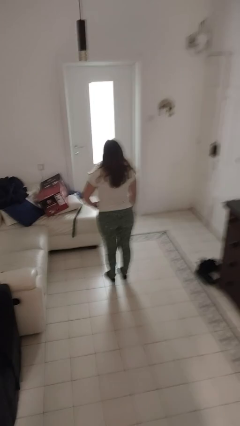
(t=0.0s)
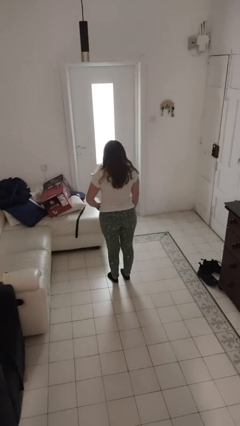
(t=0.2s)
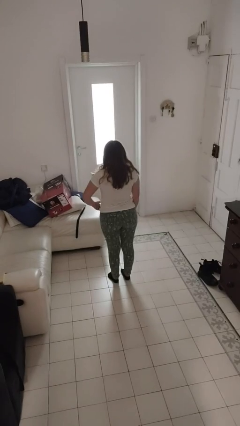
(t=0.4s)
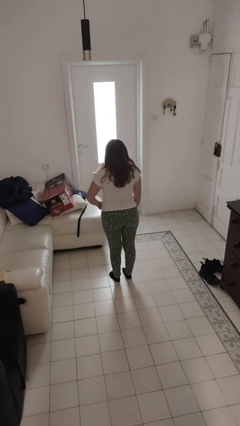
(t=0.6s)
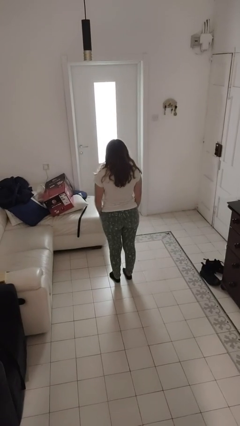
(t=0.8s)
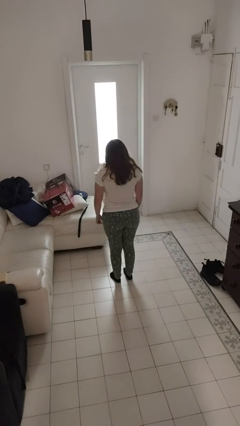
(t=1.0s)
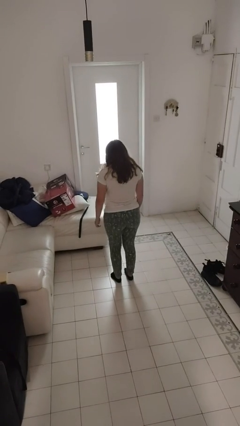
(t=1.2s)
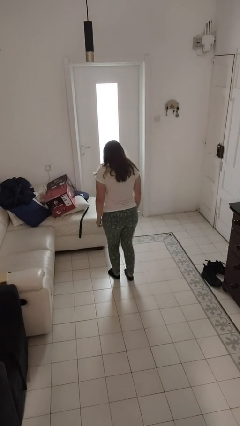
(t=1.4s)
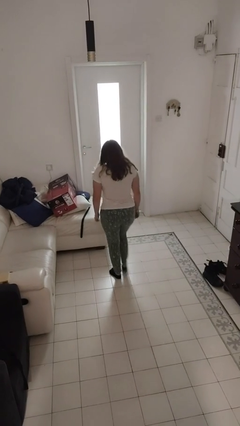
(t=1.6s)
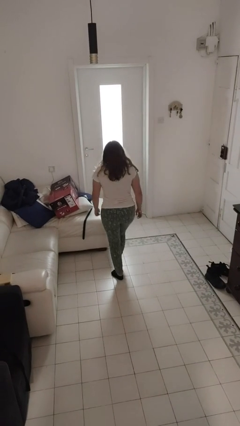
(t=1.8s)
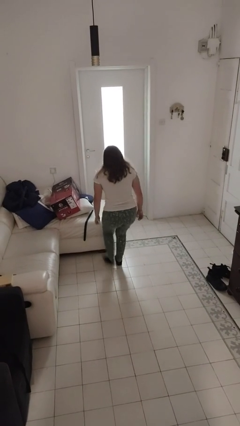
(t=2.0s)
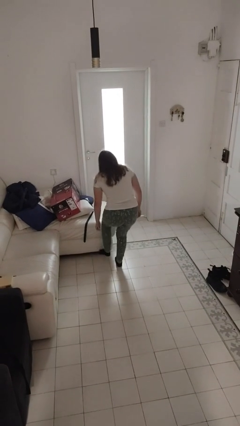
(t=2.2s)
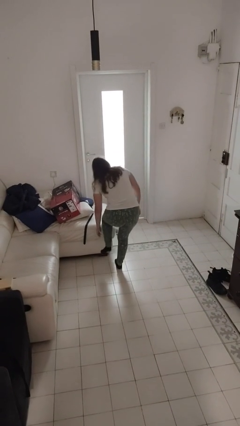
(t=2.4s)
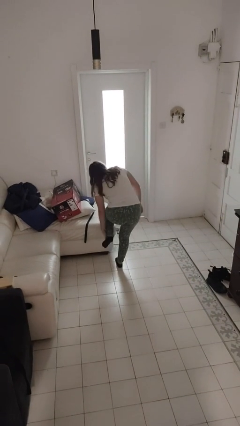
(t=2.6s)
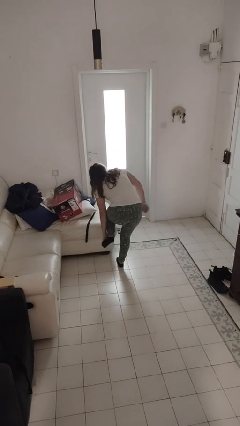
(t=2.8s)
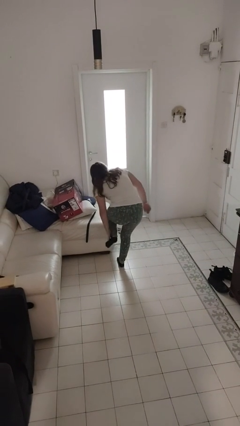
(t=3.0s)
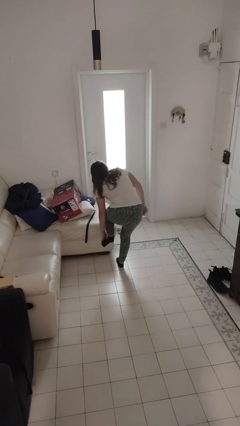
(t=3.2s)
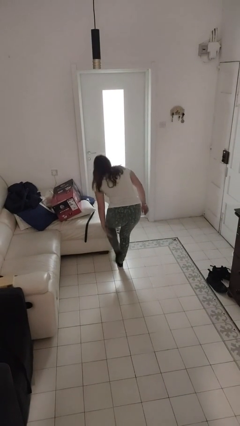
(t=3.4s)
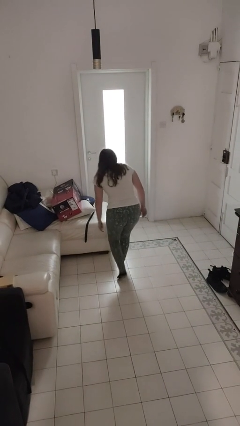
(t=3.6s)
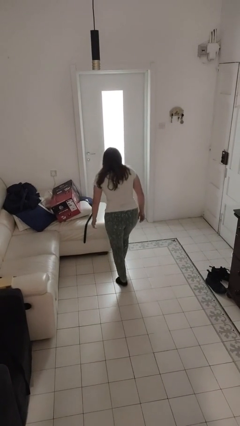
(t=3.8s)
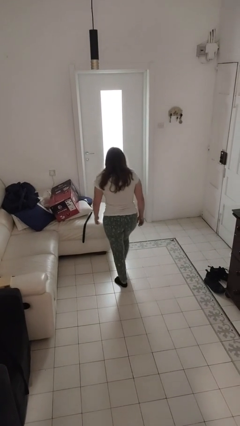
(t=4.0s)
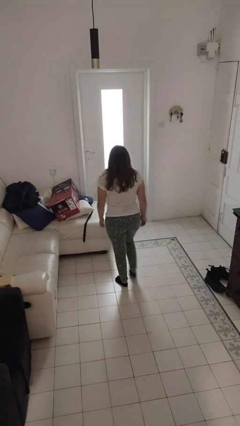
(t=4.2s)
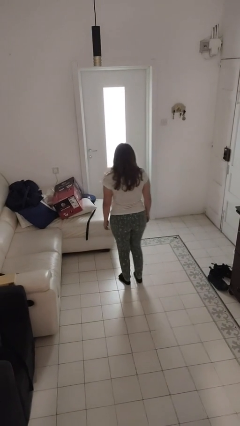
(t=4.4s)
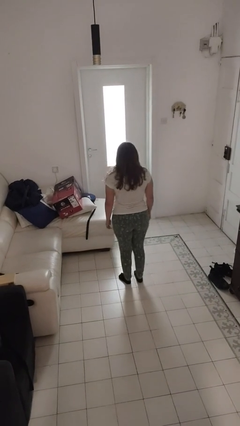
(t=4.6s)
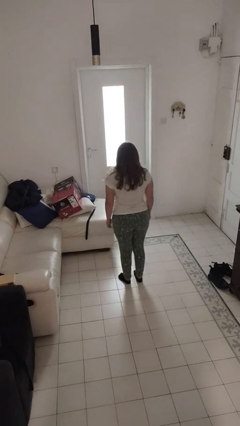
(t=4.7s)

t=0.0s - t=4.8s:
person stubs toe

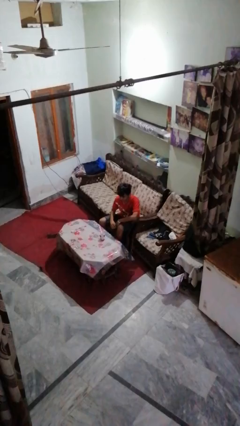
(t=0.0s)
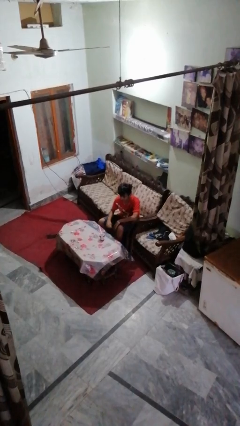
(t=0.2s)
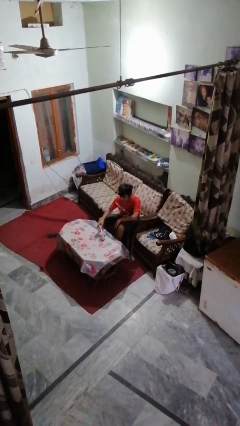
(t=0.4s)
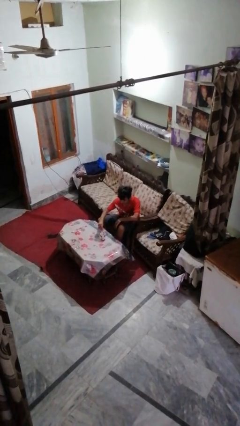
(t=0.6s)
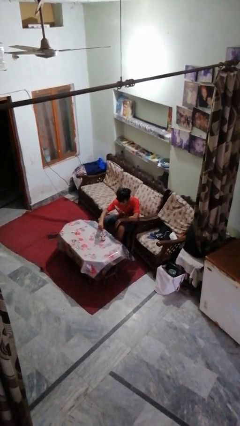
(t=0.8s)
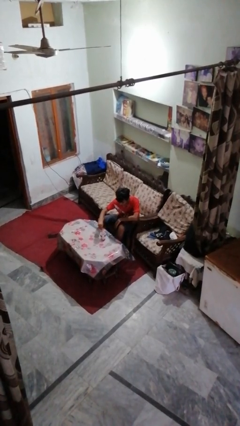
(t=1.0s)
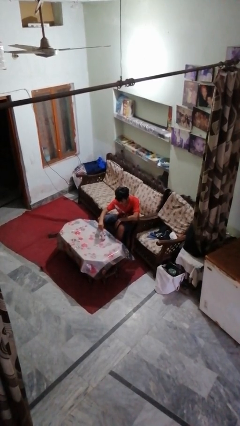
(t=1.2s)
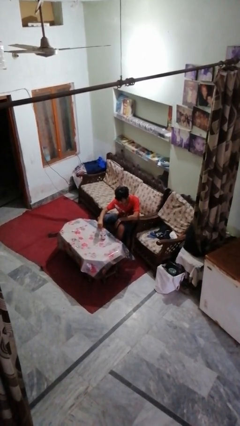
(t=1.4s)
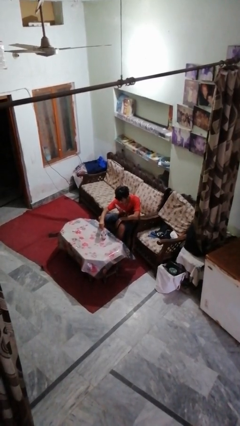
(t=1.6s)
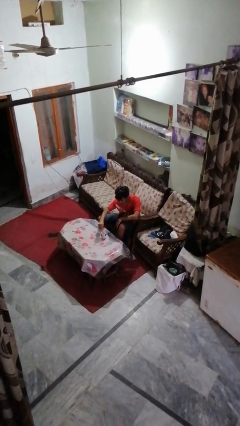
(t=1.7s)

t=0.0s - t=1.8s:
person stirs mug

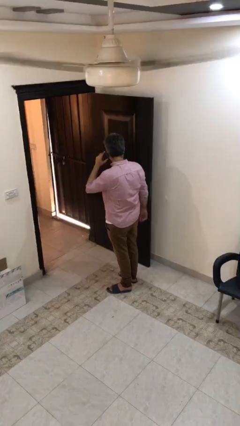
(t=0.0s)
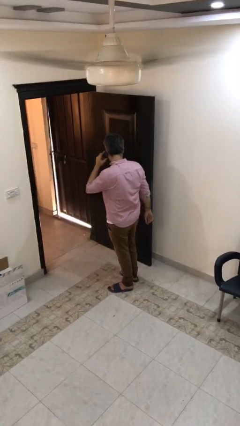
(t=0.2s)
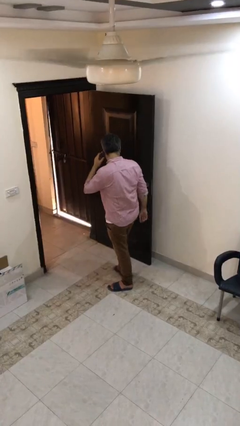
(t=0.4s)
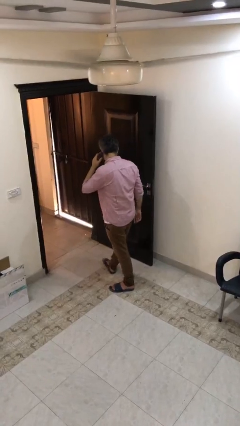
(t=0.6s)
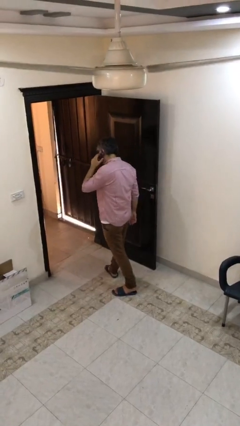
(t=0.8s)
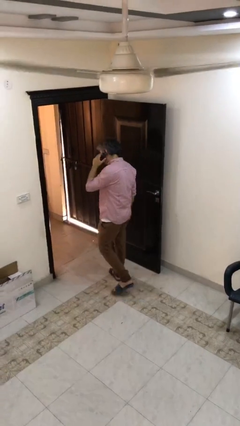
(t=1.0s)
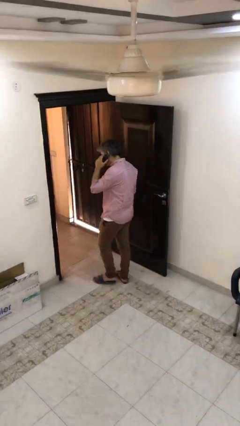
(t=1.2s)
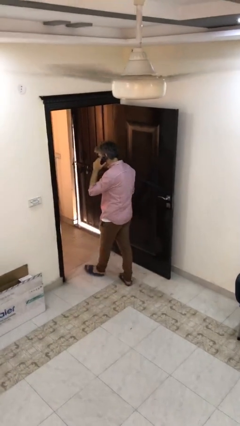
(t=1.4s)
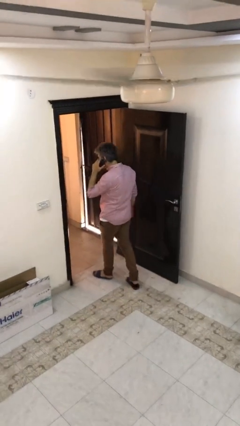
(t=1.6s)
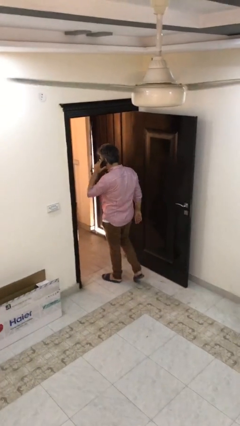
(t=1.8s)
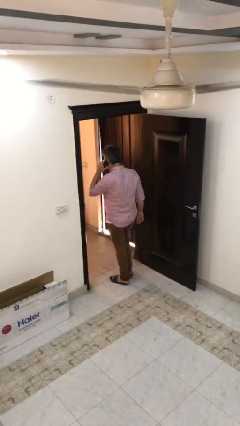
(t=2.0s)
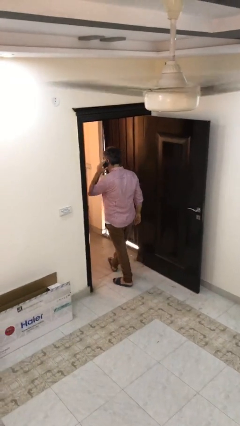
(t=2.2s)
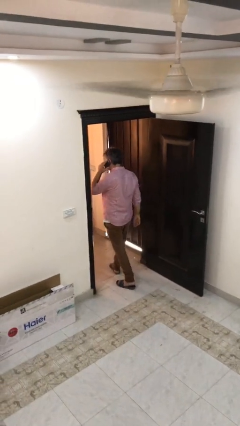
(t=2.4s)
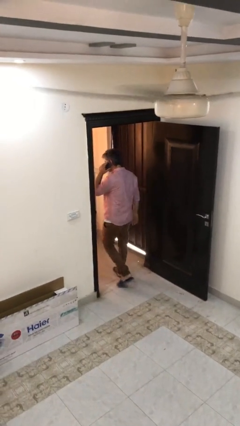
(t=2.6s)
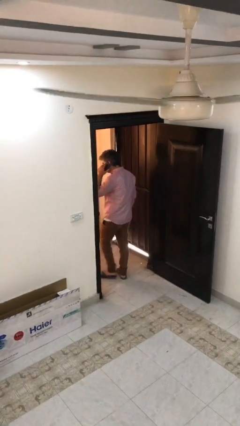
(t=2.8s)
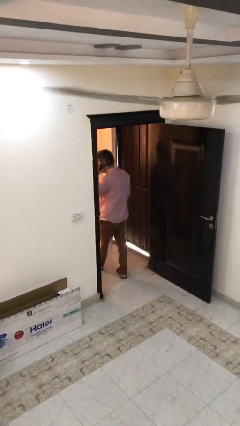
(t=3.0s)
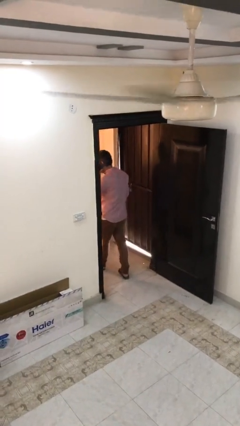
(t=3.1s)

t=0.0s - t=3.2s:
person exits scene through structure

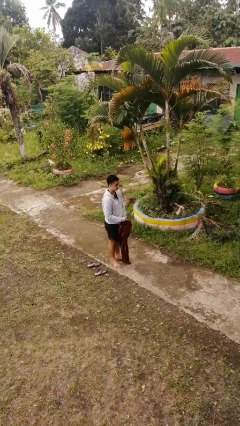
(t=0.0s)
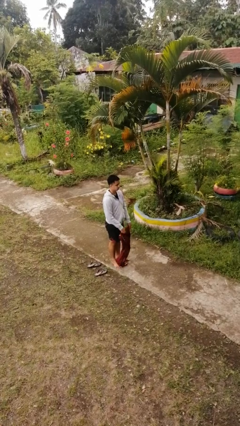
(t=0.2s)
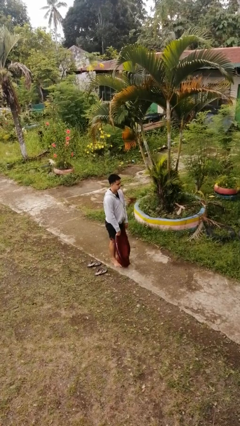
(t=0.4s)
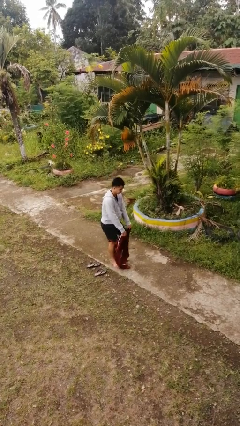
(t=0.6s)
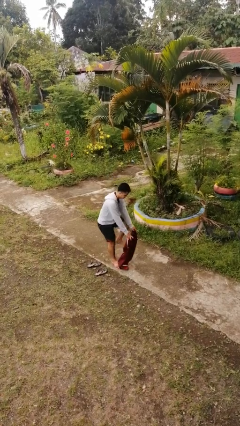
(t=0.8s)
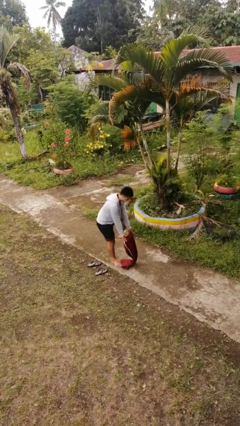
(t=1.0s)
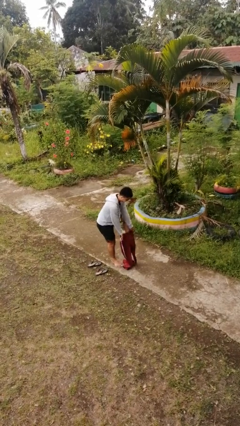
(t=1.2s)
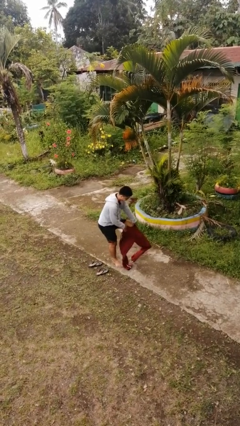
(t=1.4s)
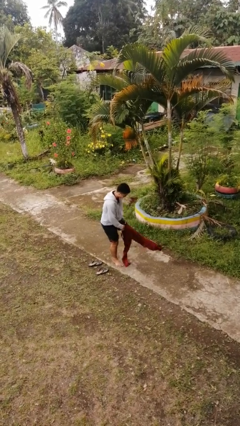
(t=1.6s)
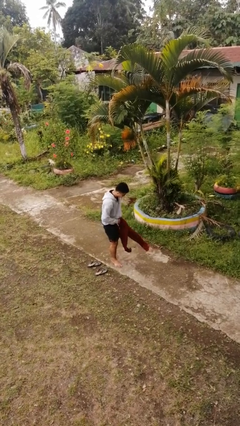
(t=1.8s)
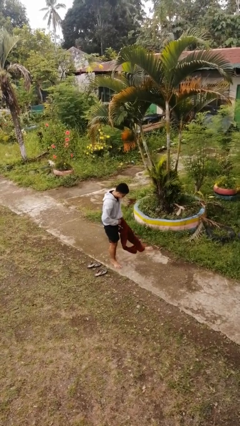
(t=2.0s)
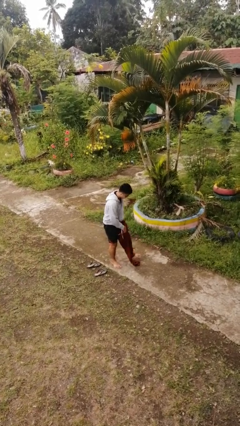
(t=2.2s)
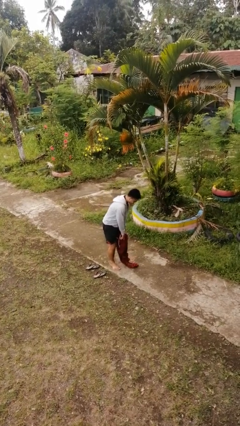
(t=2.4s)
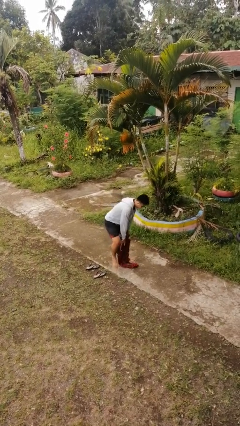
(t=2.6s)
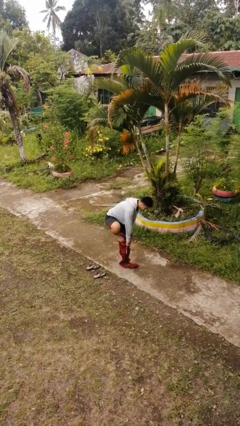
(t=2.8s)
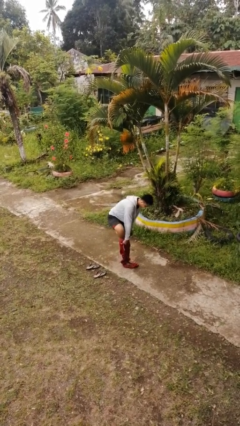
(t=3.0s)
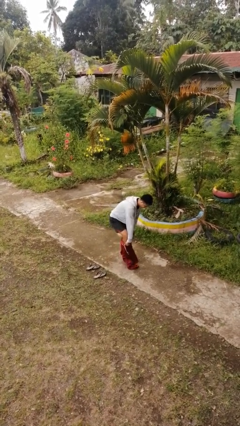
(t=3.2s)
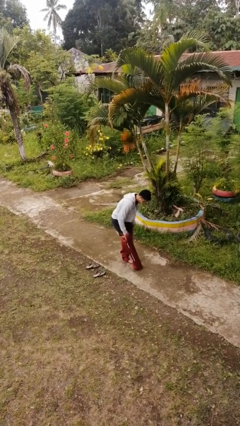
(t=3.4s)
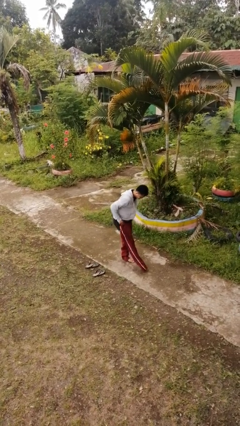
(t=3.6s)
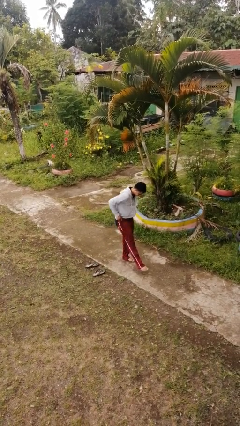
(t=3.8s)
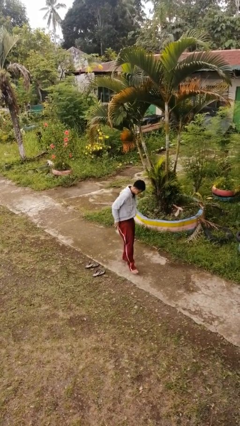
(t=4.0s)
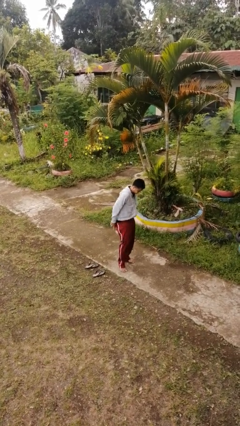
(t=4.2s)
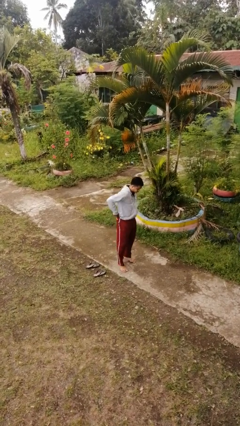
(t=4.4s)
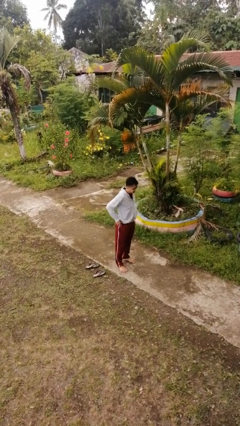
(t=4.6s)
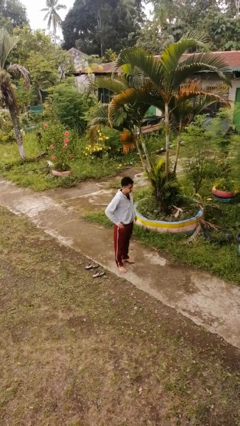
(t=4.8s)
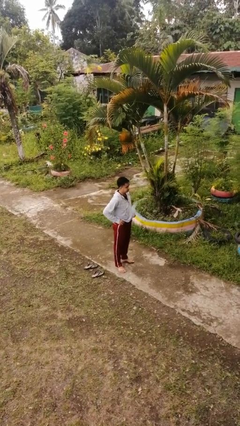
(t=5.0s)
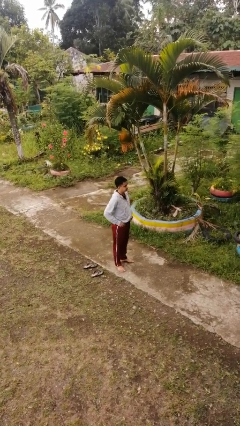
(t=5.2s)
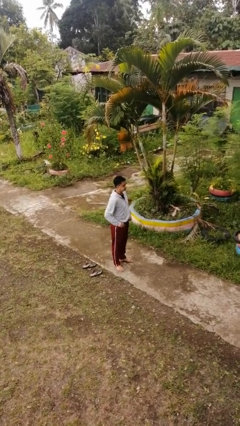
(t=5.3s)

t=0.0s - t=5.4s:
person takes off pants

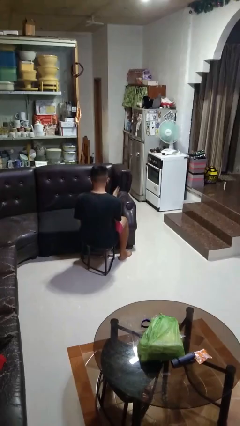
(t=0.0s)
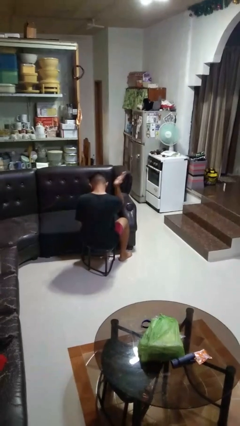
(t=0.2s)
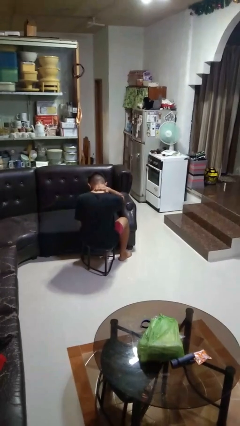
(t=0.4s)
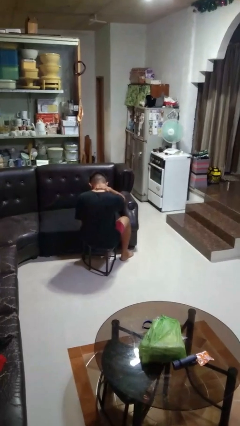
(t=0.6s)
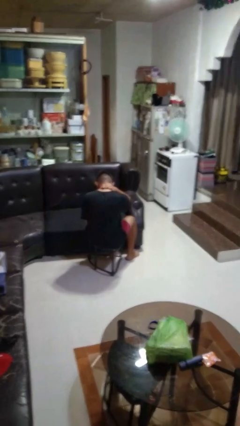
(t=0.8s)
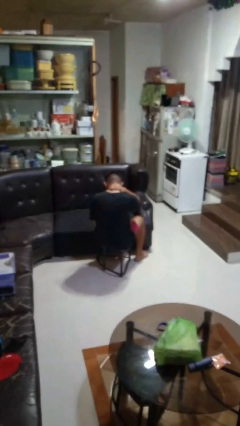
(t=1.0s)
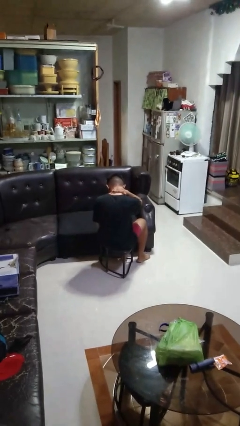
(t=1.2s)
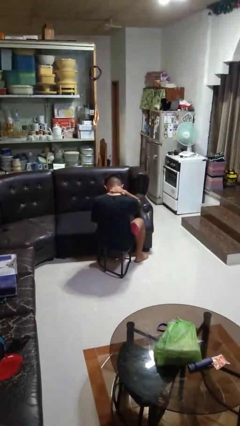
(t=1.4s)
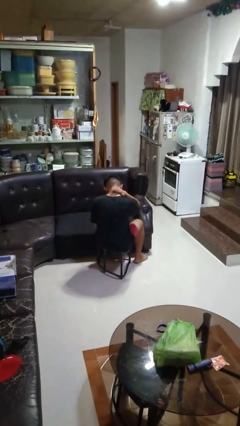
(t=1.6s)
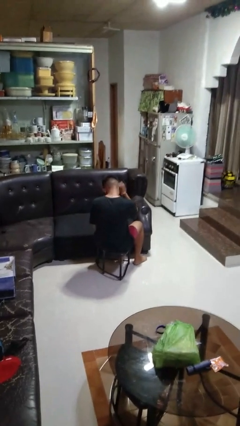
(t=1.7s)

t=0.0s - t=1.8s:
person swats bug

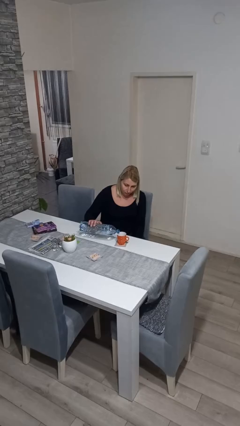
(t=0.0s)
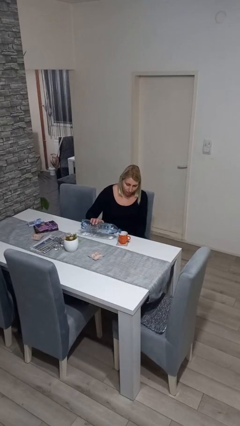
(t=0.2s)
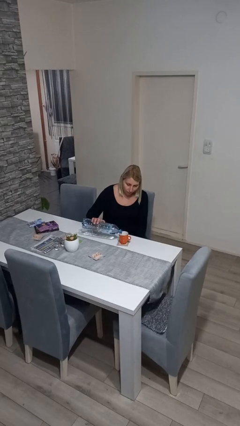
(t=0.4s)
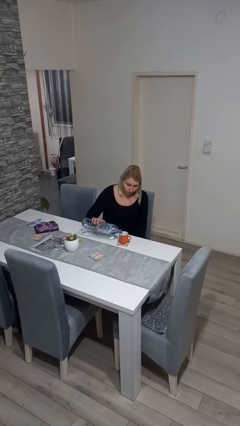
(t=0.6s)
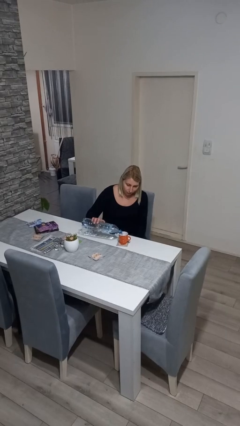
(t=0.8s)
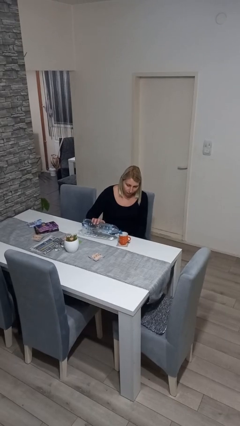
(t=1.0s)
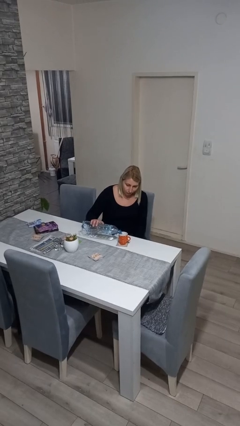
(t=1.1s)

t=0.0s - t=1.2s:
person pours liquid into cup
